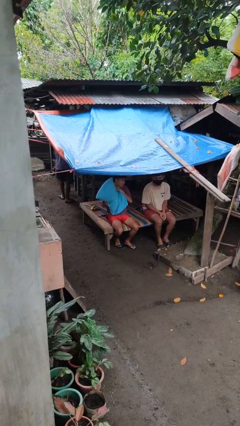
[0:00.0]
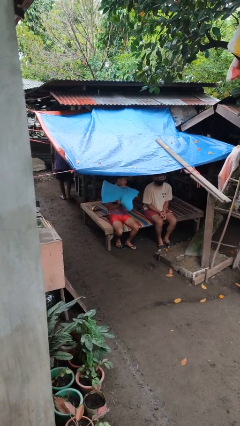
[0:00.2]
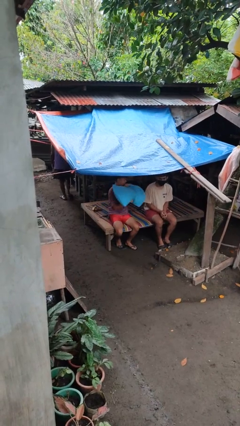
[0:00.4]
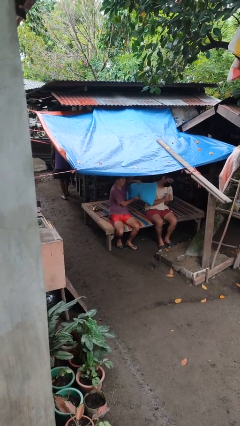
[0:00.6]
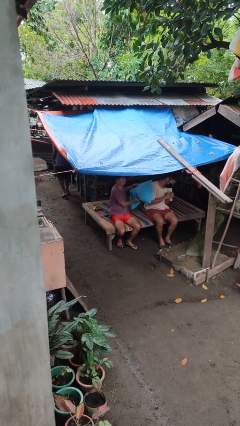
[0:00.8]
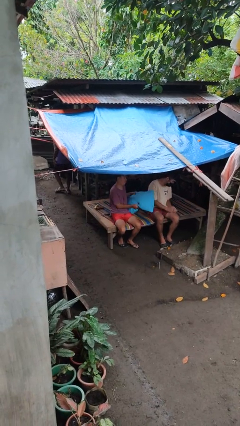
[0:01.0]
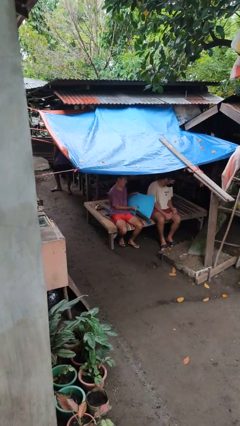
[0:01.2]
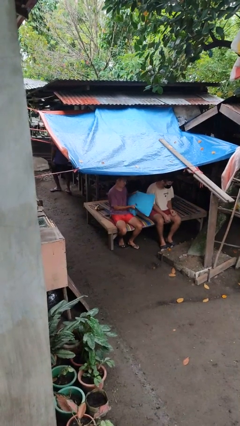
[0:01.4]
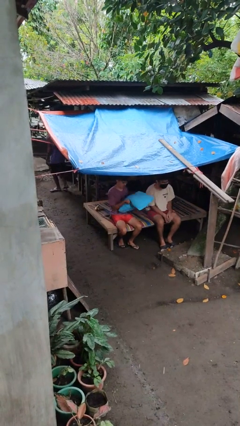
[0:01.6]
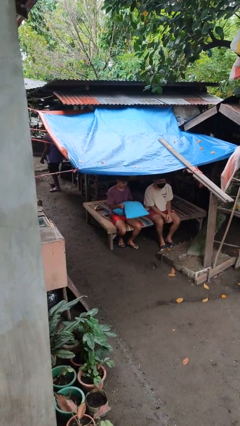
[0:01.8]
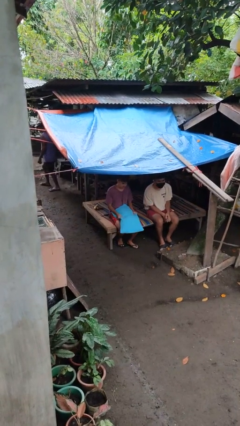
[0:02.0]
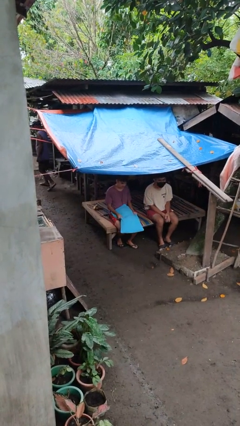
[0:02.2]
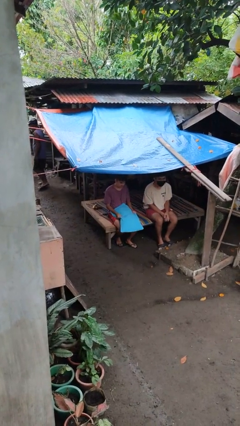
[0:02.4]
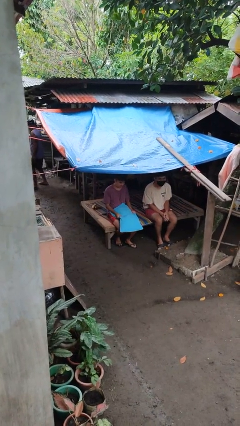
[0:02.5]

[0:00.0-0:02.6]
person hits person with pillow

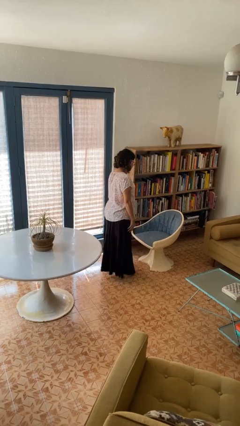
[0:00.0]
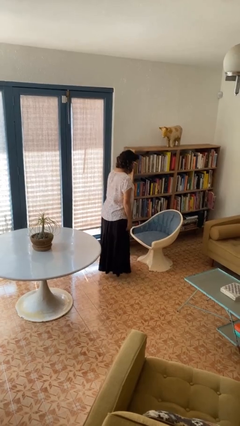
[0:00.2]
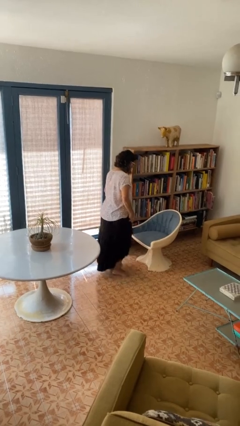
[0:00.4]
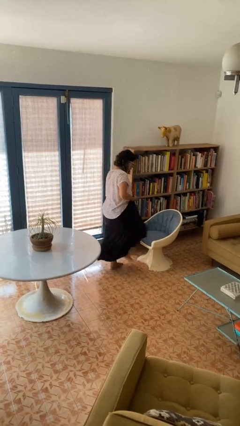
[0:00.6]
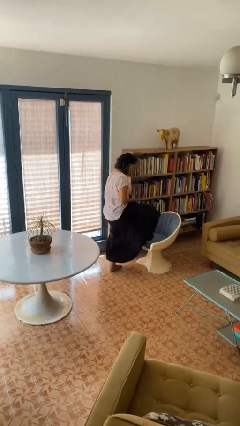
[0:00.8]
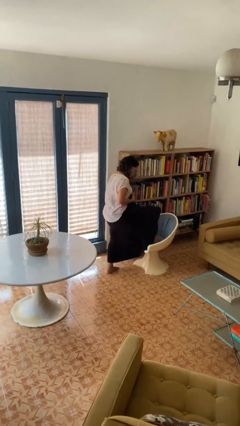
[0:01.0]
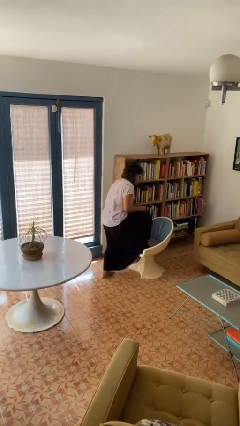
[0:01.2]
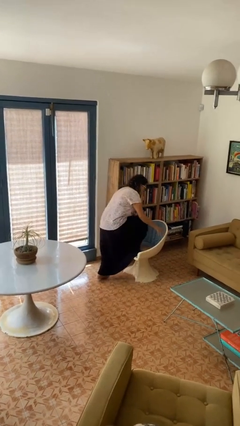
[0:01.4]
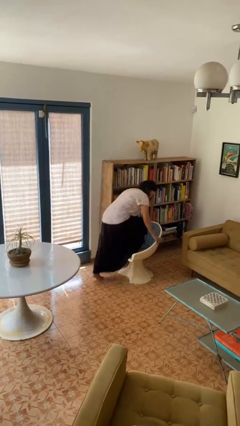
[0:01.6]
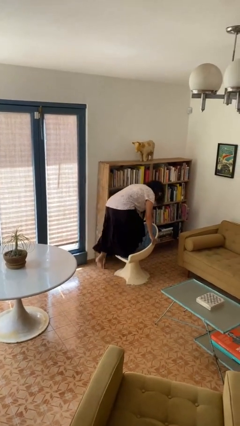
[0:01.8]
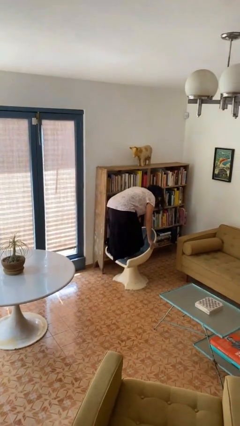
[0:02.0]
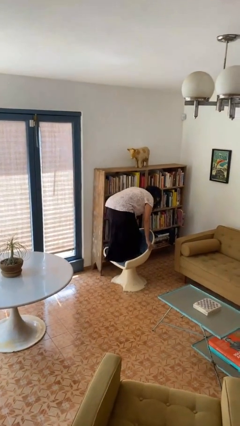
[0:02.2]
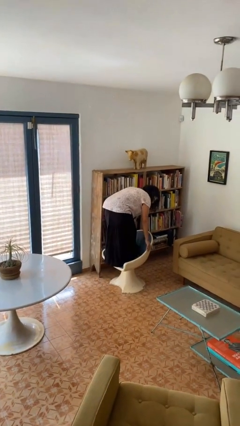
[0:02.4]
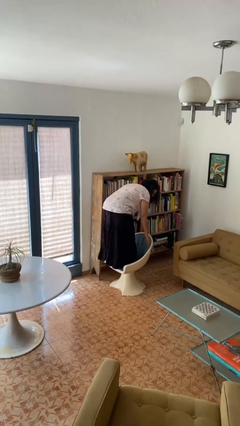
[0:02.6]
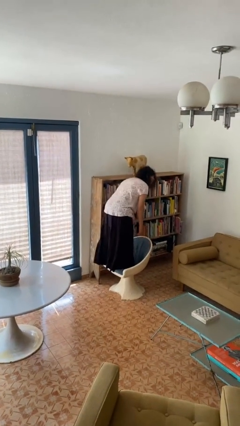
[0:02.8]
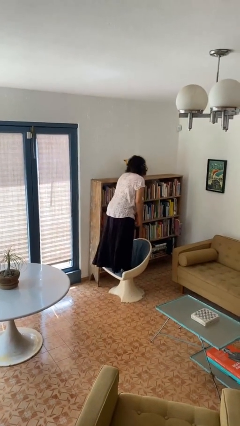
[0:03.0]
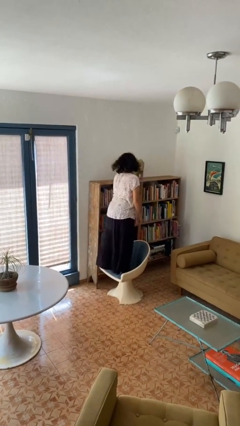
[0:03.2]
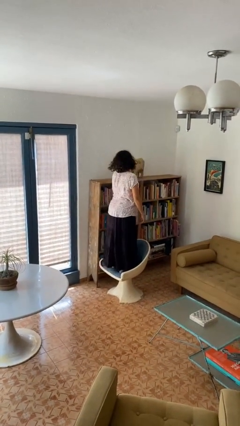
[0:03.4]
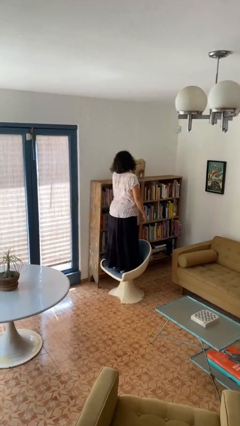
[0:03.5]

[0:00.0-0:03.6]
person climbs on chair

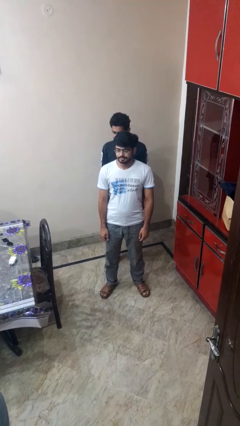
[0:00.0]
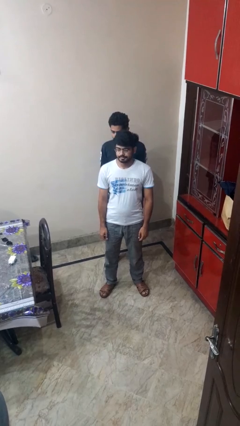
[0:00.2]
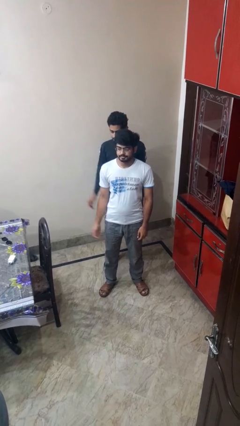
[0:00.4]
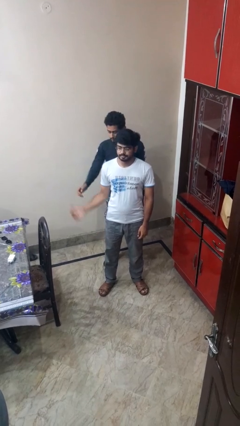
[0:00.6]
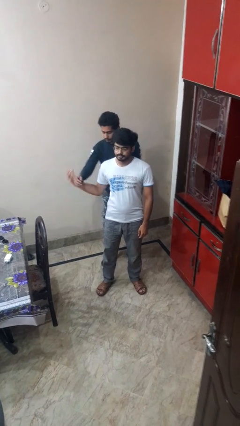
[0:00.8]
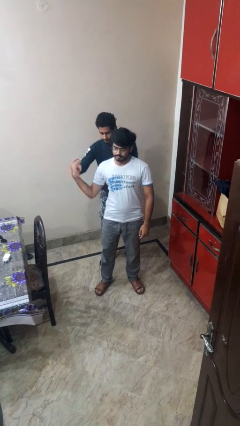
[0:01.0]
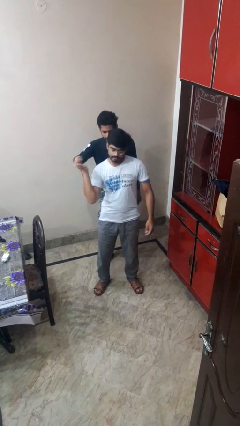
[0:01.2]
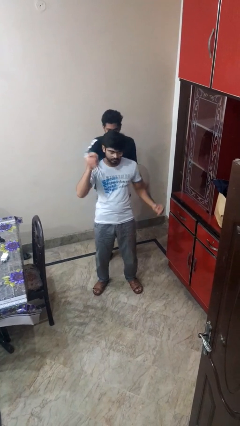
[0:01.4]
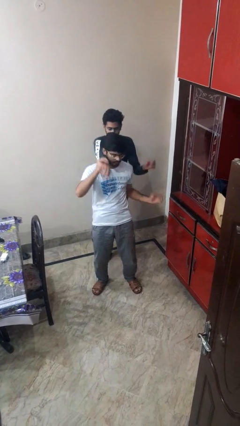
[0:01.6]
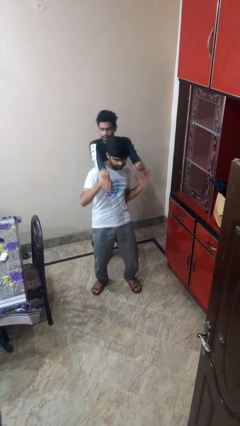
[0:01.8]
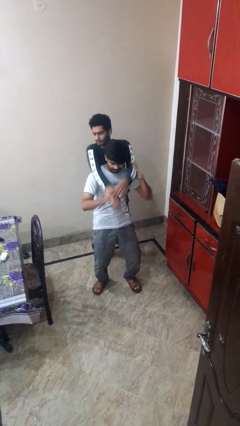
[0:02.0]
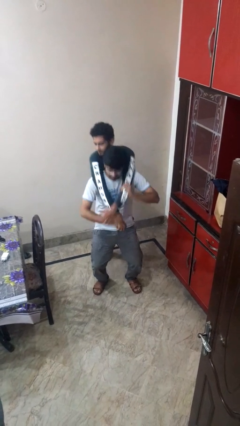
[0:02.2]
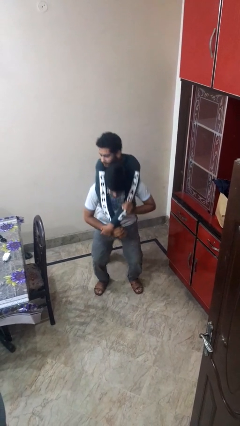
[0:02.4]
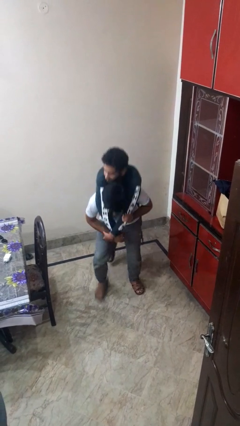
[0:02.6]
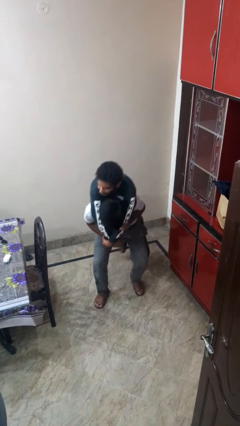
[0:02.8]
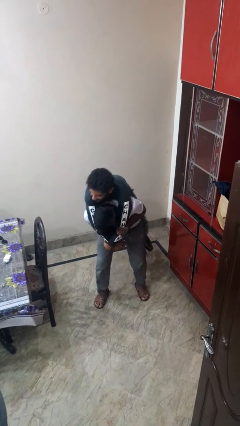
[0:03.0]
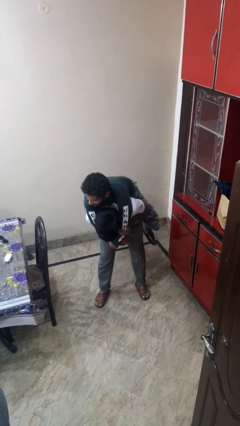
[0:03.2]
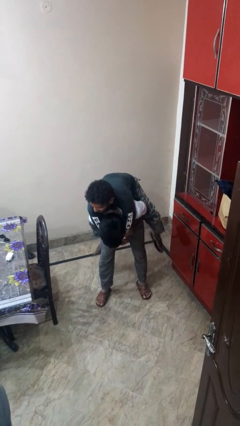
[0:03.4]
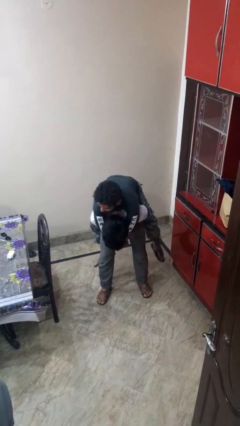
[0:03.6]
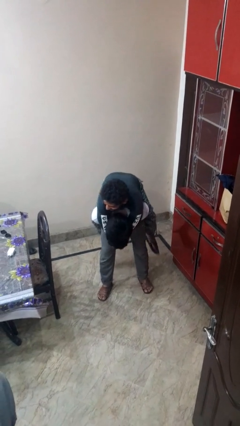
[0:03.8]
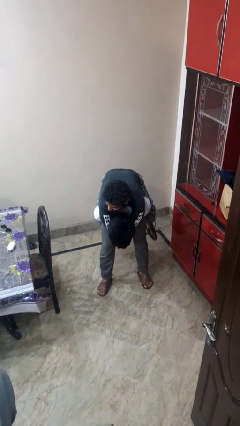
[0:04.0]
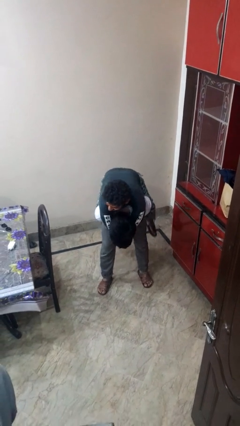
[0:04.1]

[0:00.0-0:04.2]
person carries person over shoulder

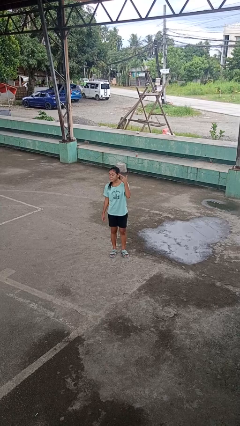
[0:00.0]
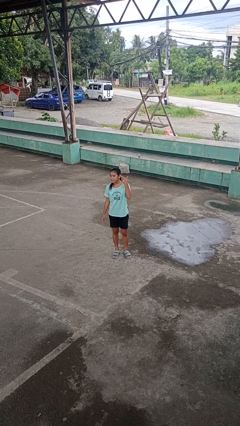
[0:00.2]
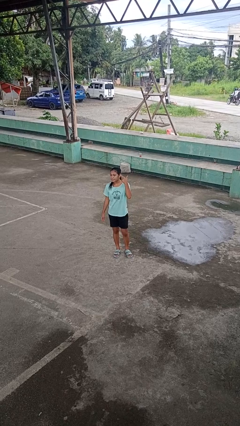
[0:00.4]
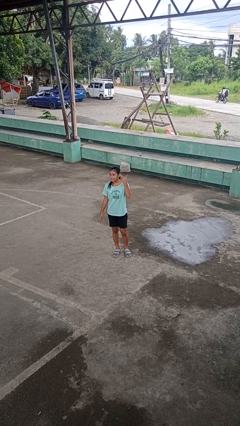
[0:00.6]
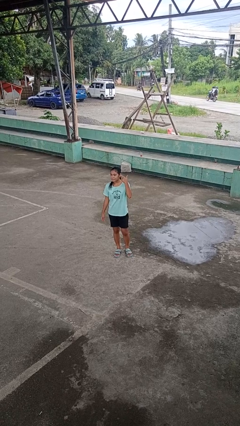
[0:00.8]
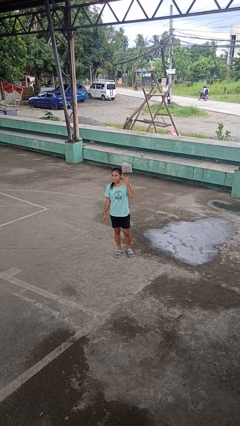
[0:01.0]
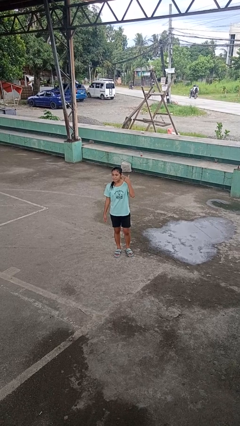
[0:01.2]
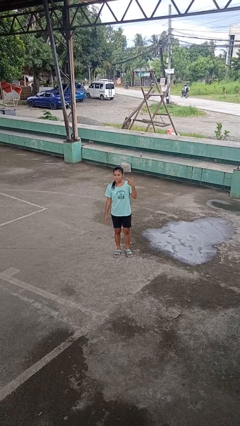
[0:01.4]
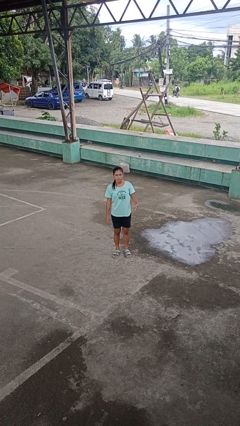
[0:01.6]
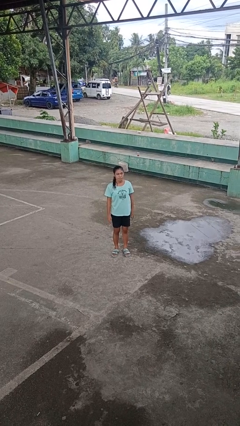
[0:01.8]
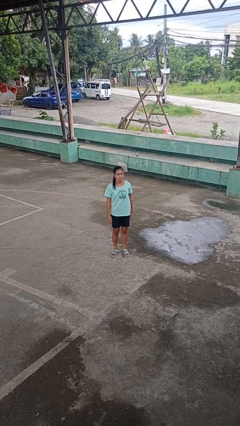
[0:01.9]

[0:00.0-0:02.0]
person gestures listen closely

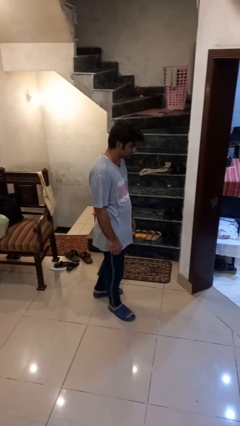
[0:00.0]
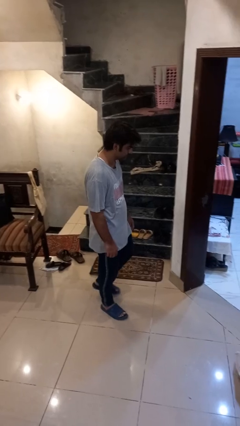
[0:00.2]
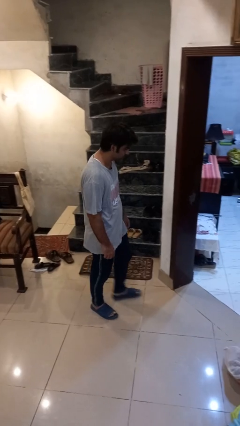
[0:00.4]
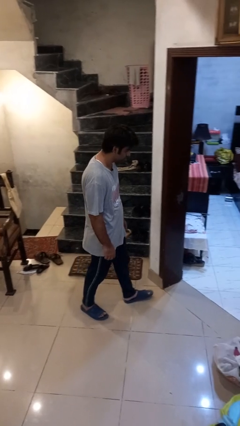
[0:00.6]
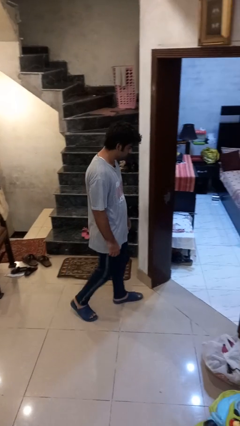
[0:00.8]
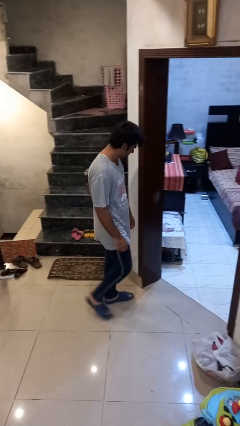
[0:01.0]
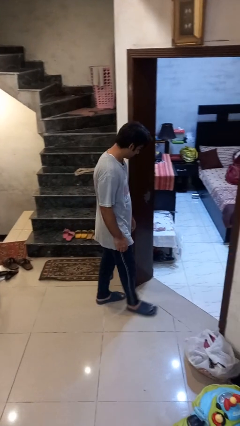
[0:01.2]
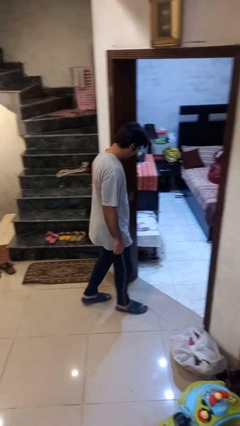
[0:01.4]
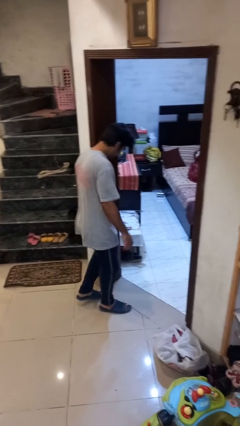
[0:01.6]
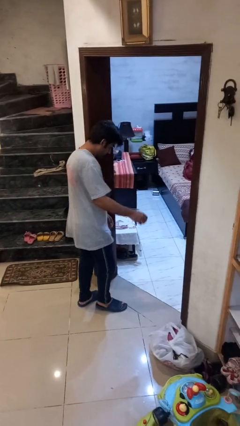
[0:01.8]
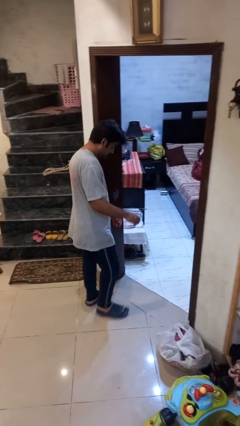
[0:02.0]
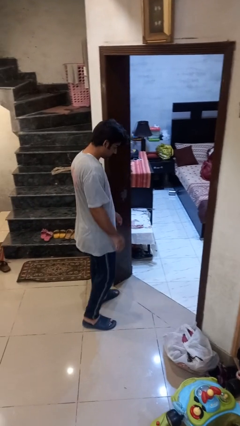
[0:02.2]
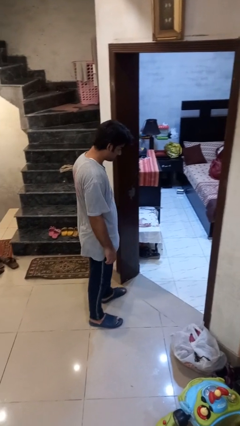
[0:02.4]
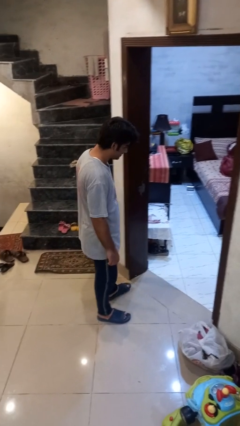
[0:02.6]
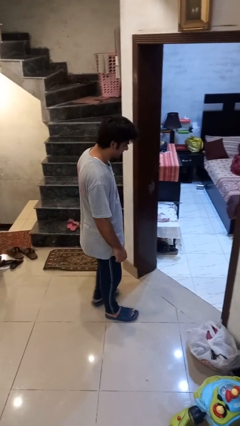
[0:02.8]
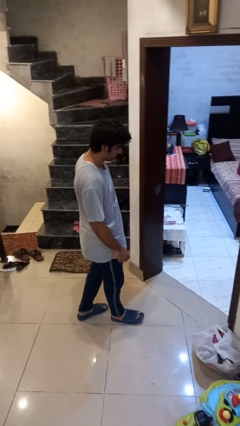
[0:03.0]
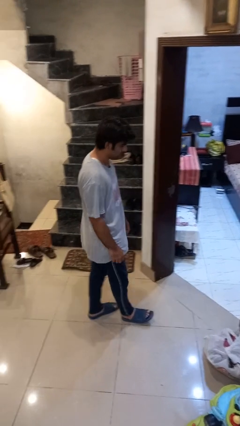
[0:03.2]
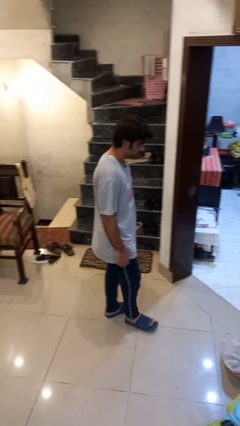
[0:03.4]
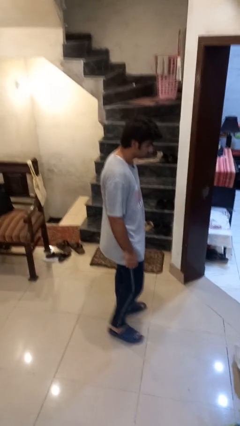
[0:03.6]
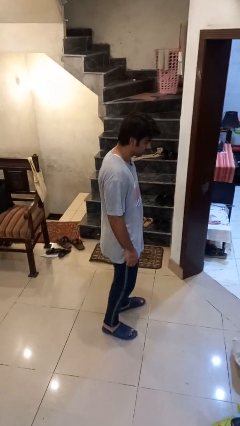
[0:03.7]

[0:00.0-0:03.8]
person bumps into wall

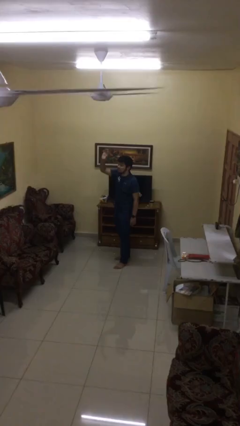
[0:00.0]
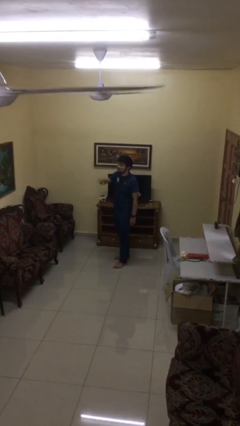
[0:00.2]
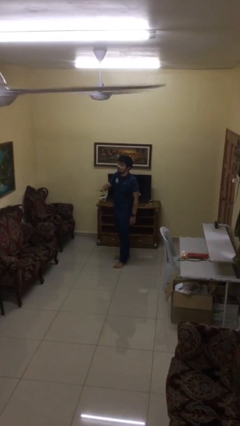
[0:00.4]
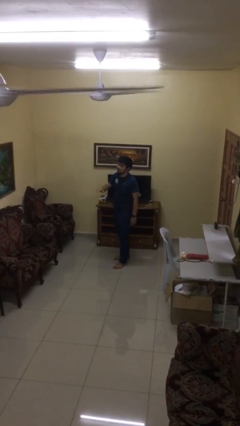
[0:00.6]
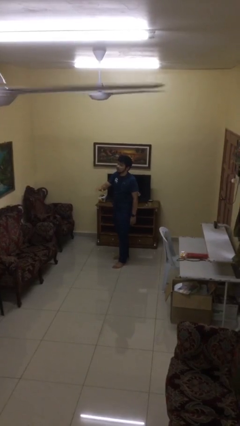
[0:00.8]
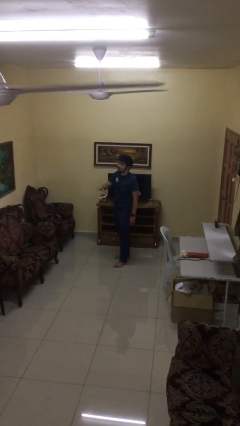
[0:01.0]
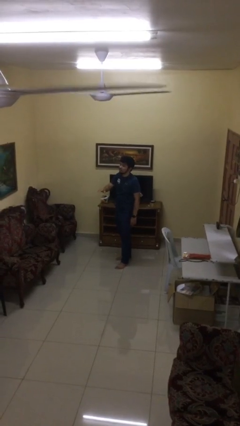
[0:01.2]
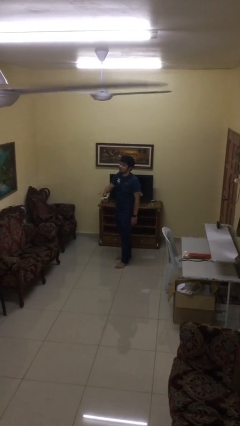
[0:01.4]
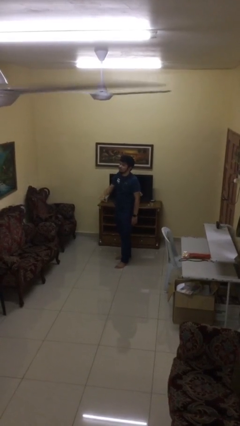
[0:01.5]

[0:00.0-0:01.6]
person gestures swipe down
